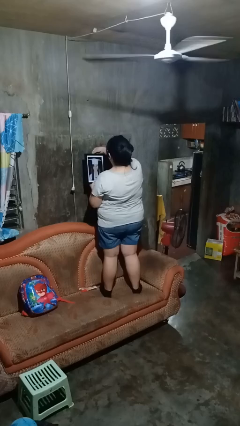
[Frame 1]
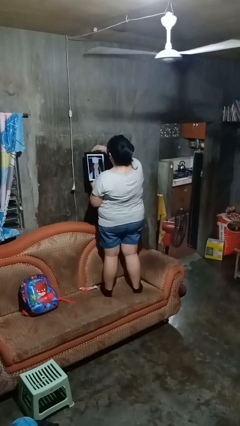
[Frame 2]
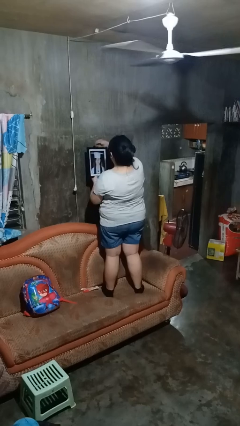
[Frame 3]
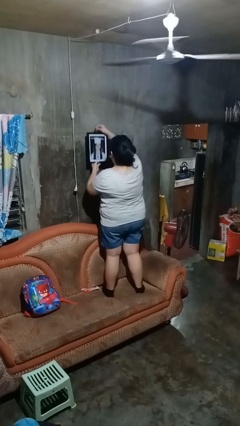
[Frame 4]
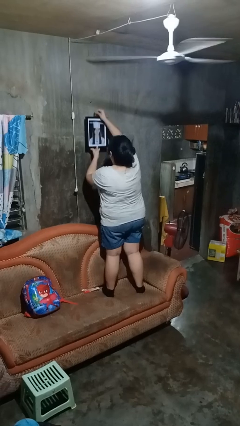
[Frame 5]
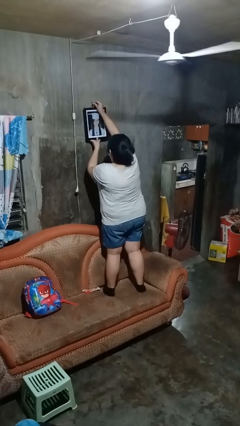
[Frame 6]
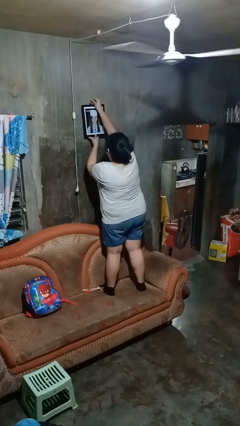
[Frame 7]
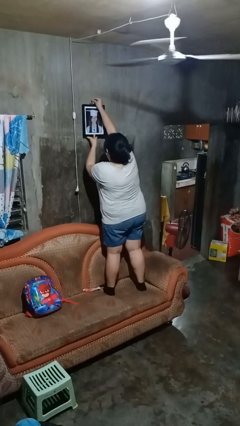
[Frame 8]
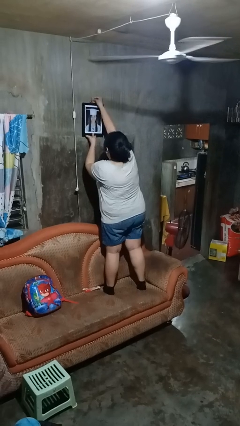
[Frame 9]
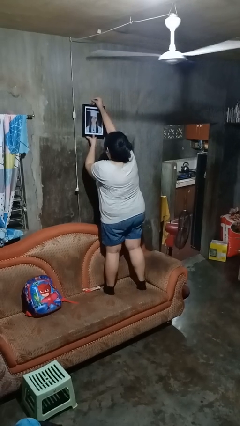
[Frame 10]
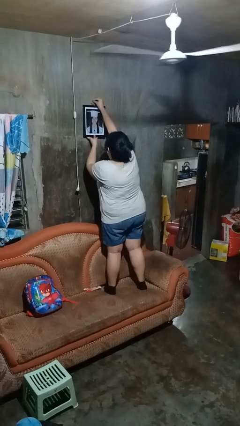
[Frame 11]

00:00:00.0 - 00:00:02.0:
person puts up picture frame

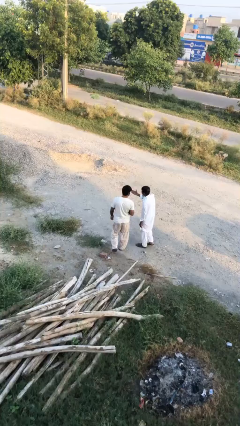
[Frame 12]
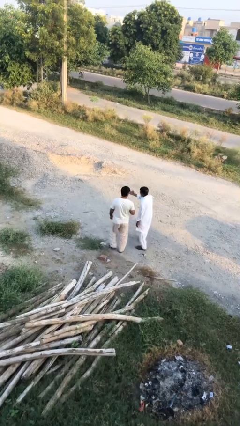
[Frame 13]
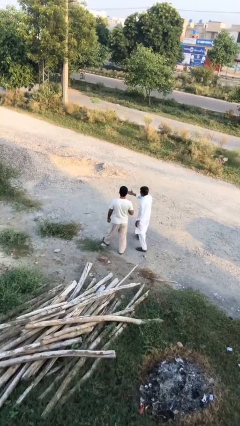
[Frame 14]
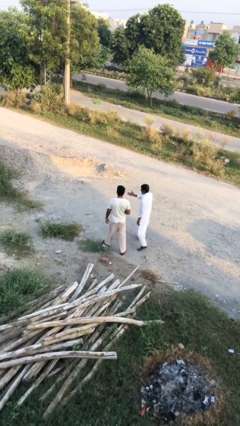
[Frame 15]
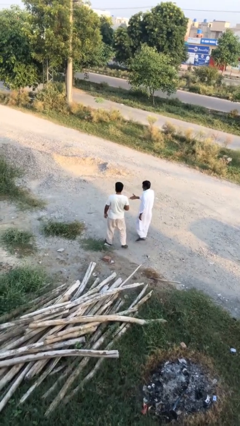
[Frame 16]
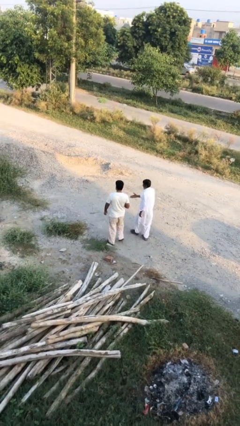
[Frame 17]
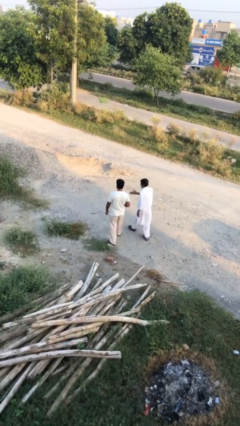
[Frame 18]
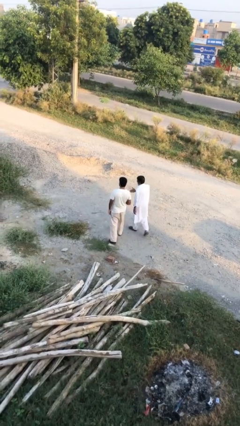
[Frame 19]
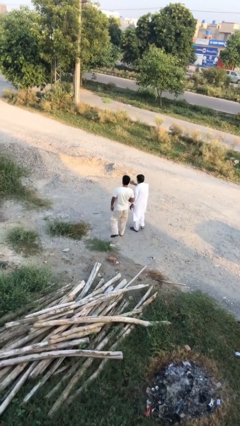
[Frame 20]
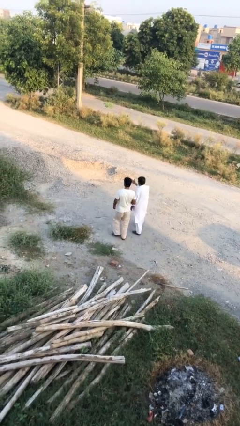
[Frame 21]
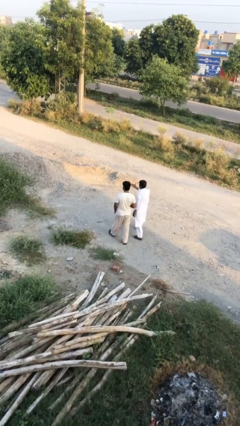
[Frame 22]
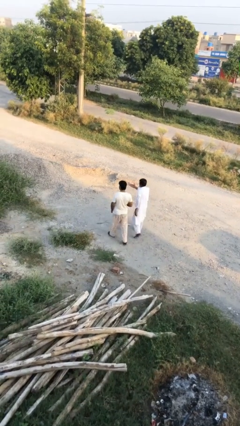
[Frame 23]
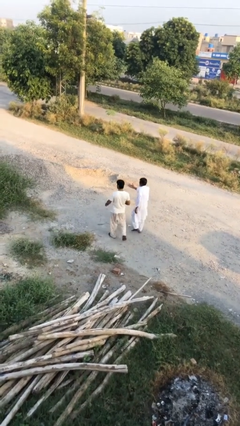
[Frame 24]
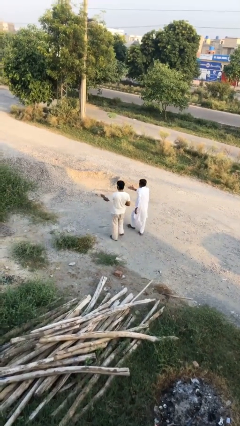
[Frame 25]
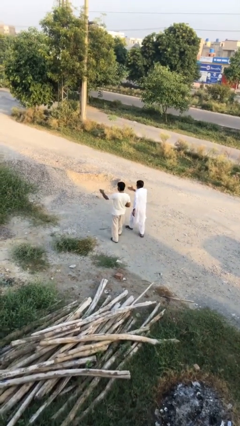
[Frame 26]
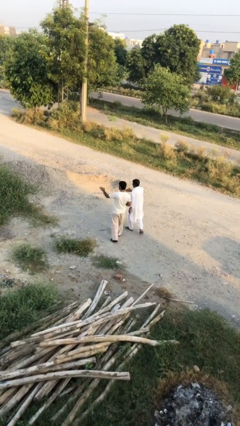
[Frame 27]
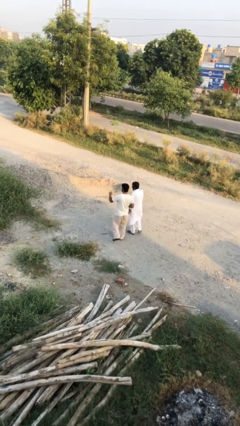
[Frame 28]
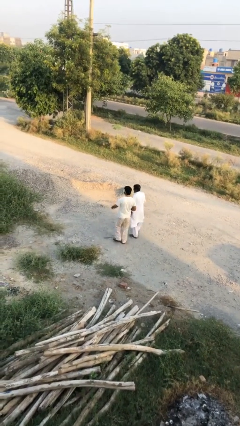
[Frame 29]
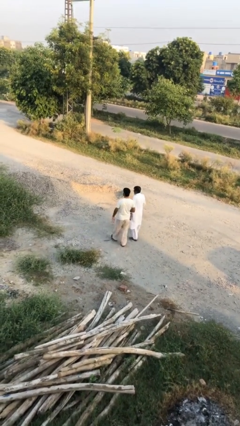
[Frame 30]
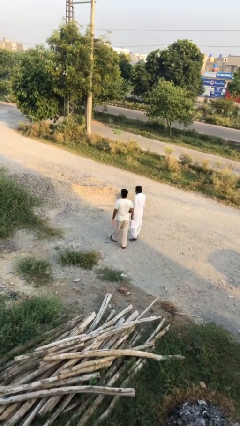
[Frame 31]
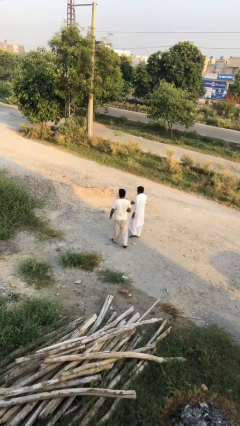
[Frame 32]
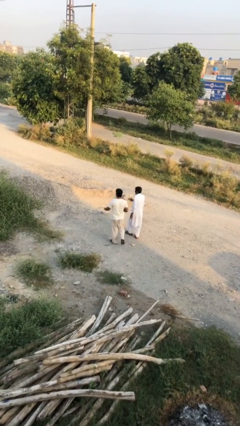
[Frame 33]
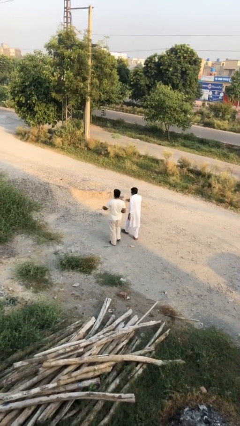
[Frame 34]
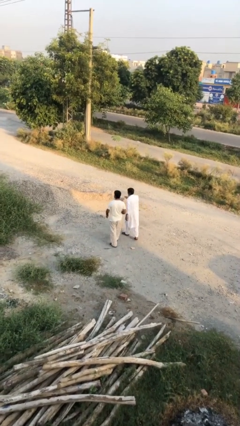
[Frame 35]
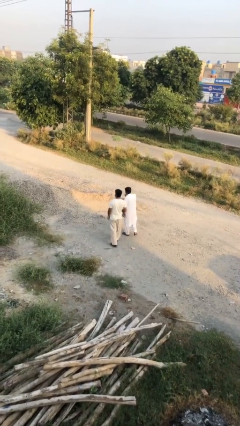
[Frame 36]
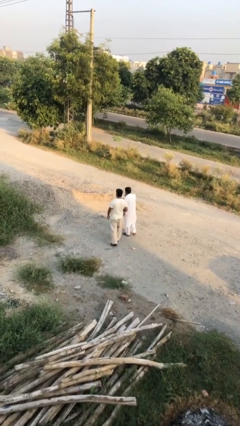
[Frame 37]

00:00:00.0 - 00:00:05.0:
person talks to person

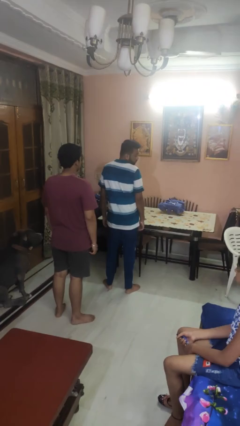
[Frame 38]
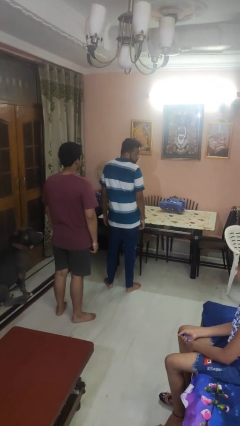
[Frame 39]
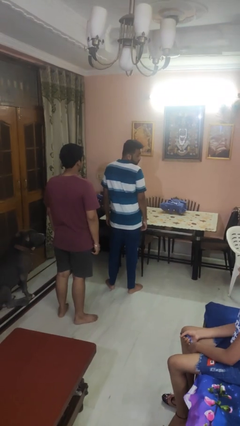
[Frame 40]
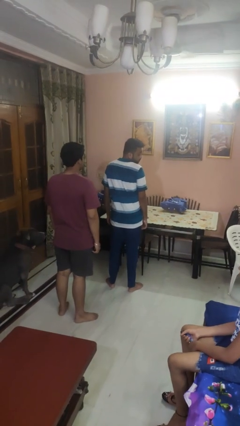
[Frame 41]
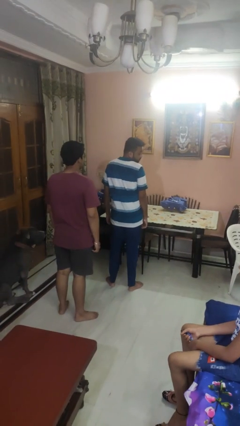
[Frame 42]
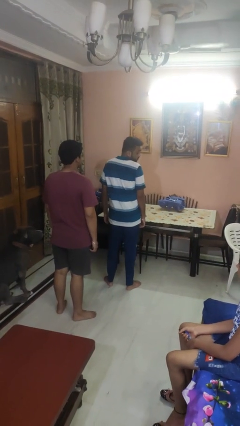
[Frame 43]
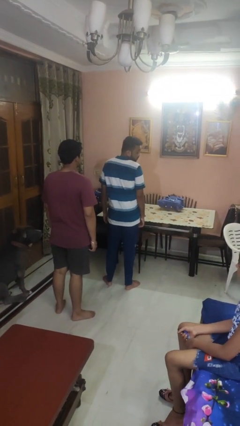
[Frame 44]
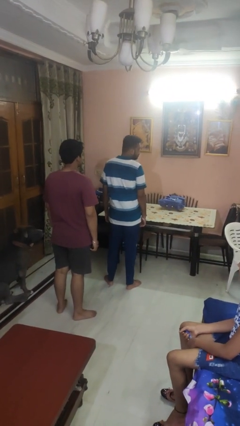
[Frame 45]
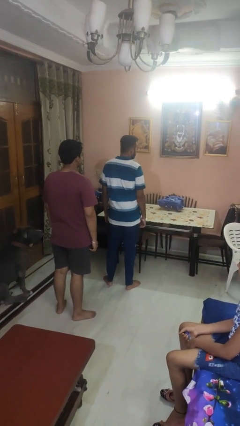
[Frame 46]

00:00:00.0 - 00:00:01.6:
person looks over shoulder

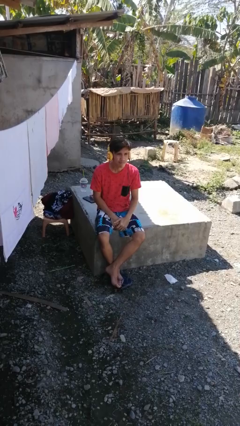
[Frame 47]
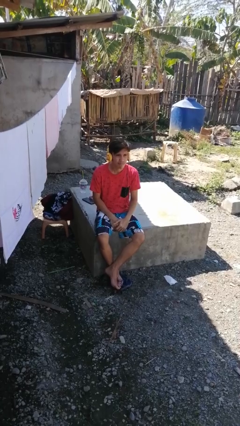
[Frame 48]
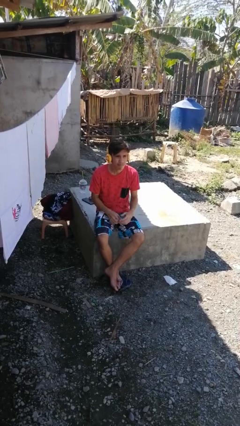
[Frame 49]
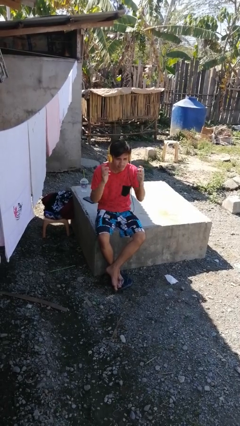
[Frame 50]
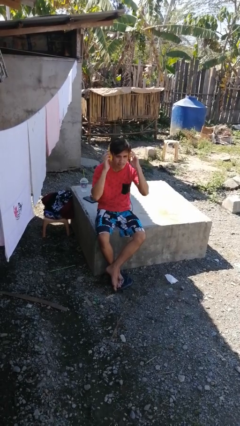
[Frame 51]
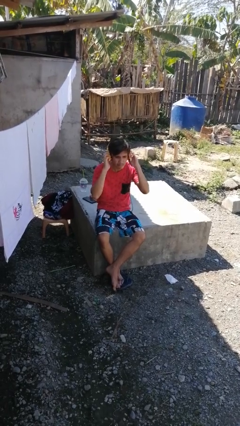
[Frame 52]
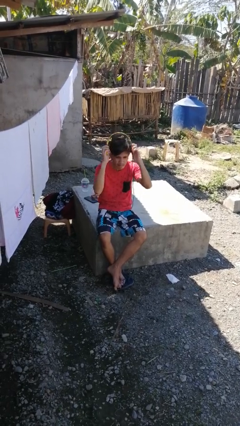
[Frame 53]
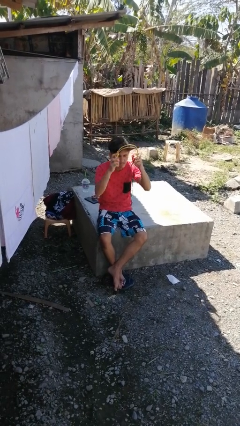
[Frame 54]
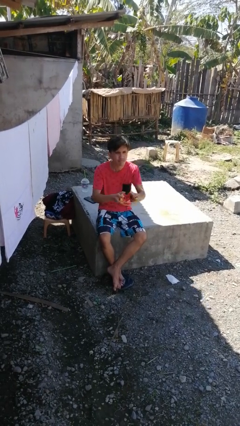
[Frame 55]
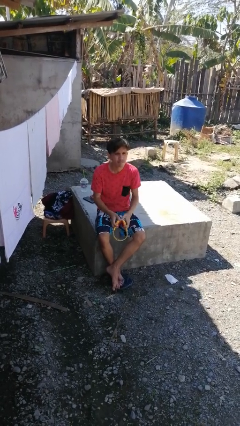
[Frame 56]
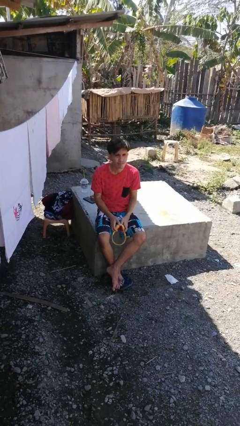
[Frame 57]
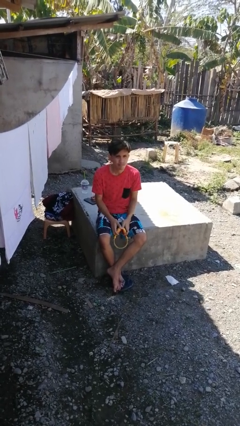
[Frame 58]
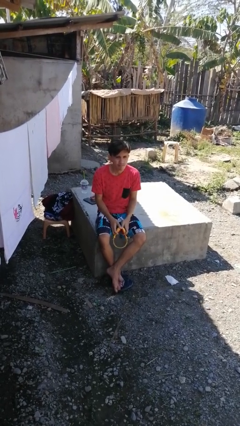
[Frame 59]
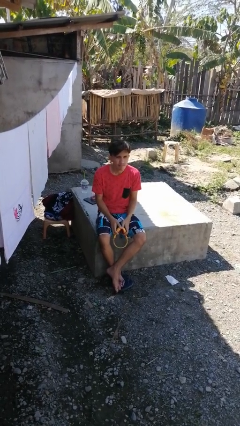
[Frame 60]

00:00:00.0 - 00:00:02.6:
person takes off headphones

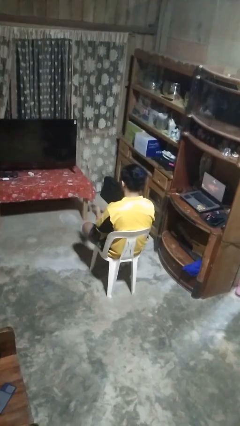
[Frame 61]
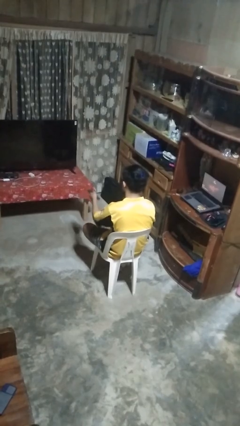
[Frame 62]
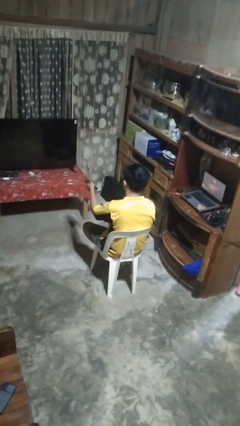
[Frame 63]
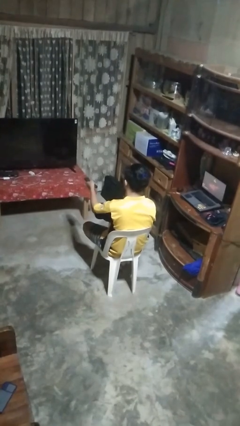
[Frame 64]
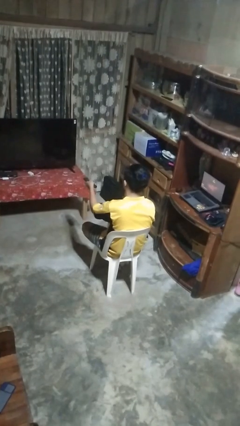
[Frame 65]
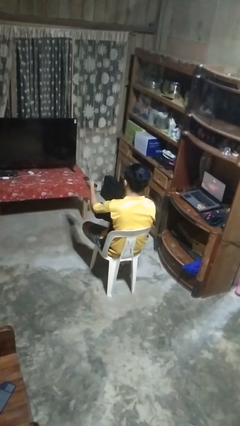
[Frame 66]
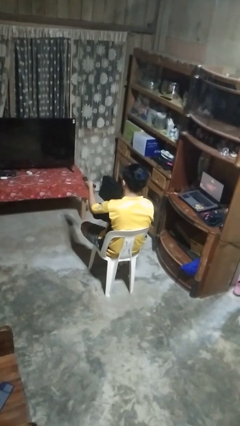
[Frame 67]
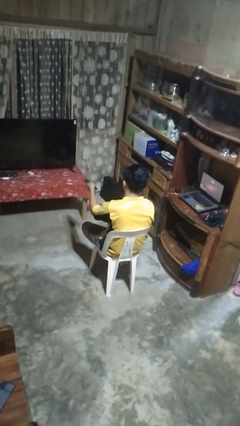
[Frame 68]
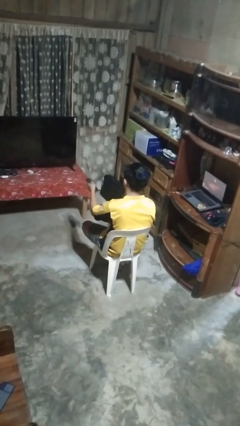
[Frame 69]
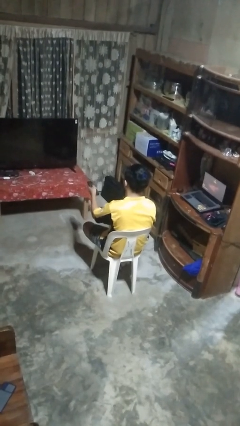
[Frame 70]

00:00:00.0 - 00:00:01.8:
person uses television remote

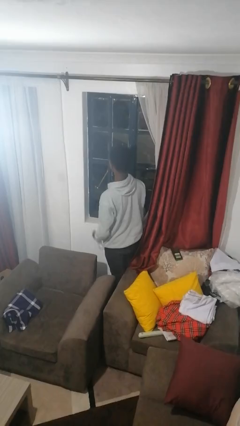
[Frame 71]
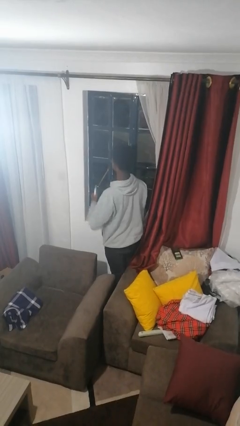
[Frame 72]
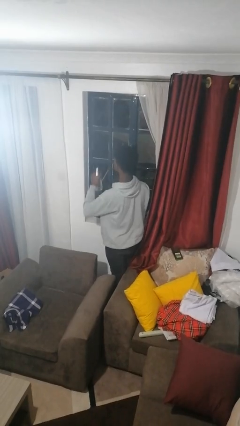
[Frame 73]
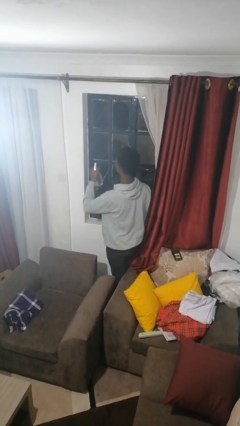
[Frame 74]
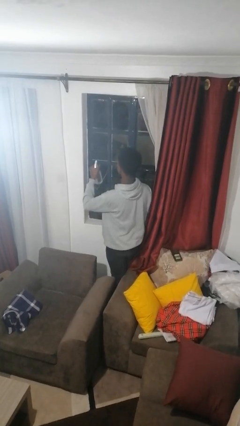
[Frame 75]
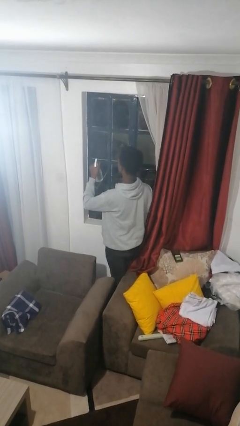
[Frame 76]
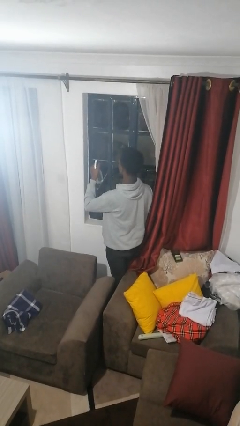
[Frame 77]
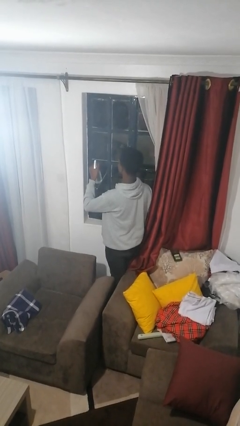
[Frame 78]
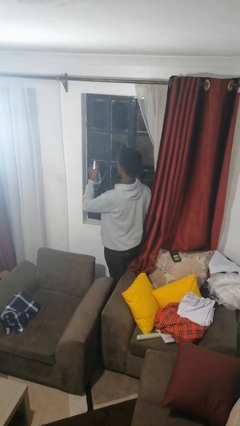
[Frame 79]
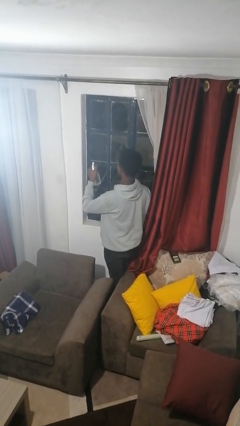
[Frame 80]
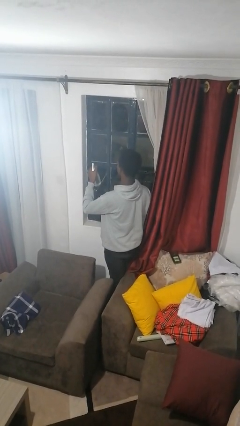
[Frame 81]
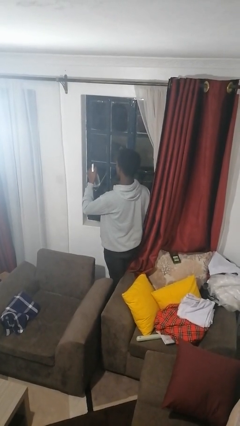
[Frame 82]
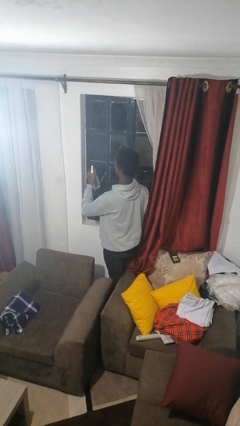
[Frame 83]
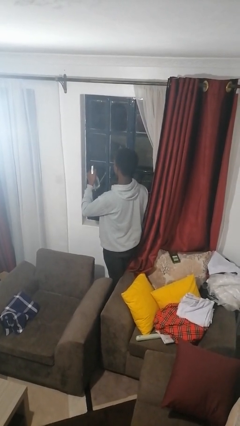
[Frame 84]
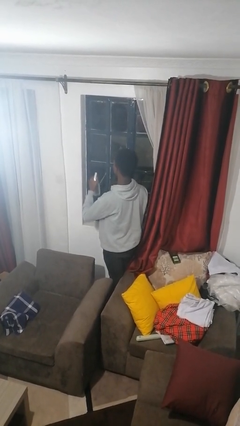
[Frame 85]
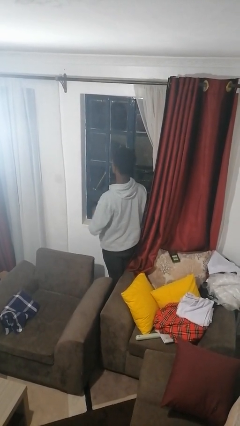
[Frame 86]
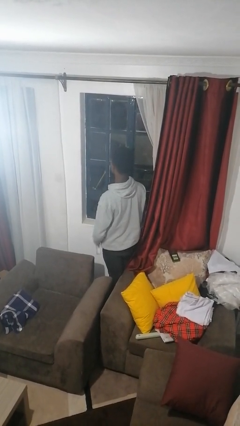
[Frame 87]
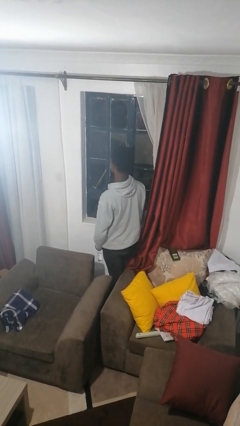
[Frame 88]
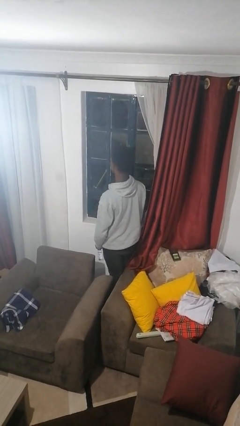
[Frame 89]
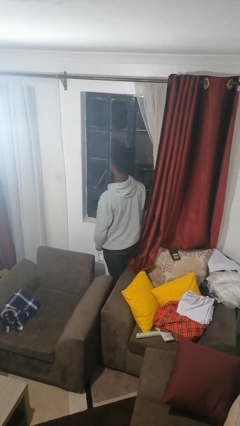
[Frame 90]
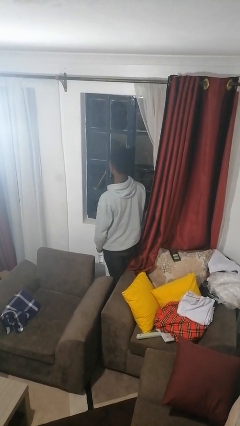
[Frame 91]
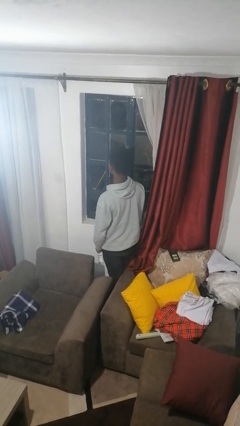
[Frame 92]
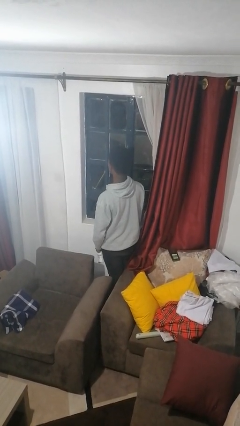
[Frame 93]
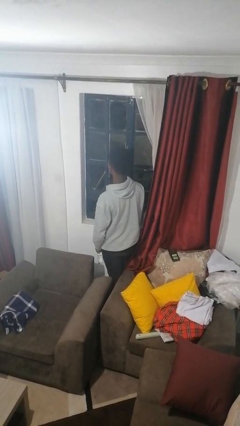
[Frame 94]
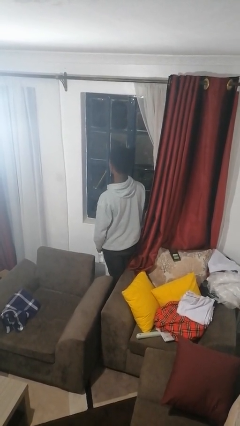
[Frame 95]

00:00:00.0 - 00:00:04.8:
person sprays from bottle
